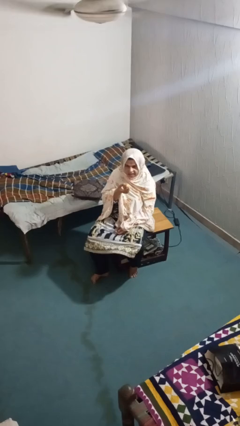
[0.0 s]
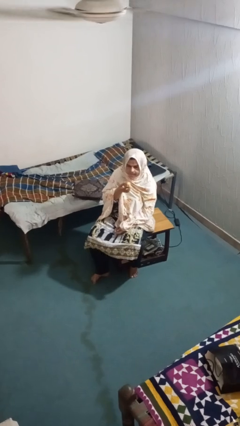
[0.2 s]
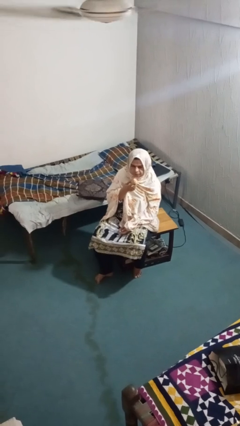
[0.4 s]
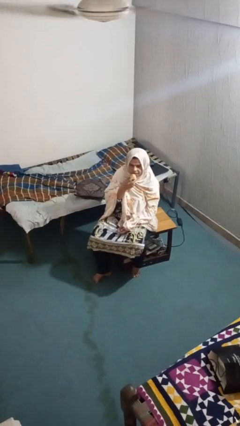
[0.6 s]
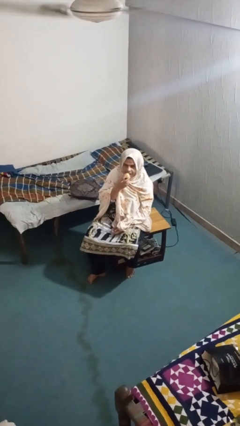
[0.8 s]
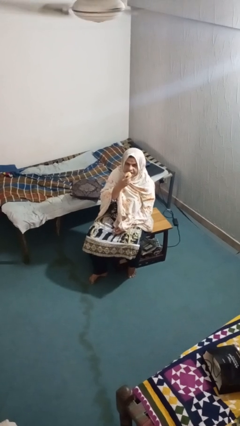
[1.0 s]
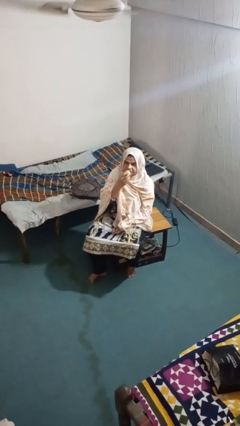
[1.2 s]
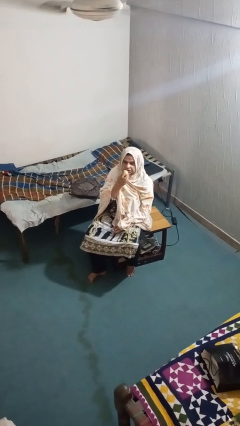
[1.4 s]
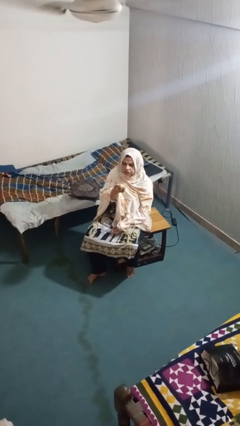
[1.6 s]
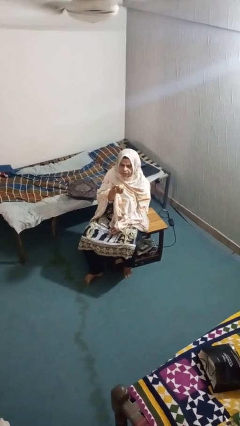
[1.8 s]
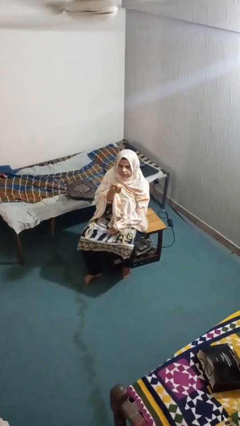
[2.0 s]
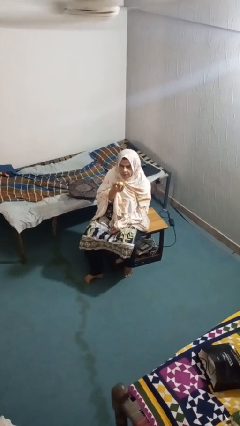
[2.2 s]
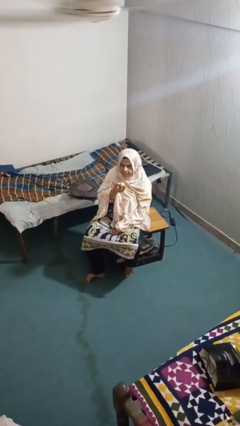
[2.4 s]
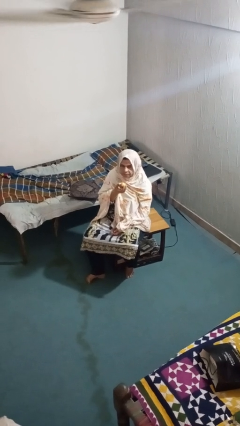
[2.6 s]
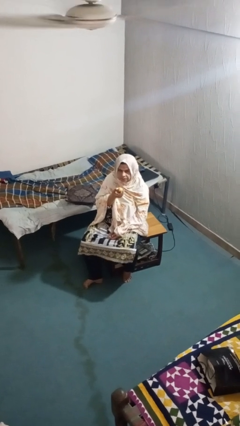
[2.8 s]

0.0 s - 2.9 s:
person eats apple

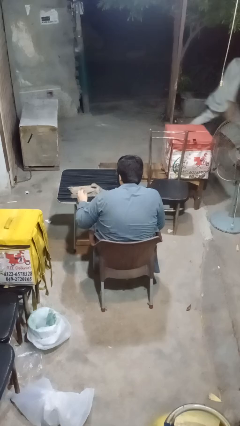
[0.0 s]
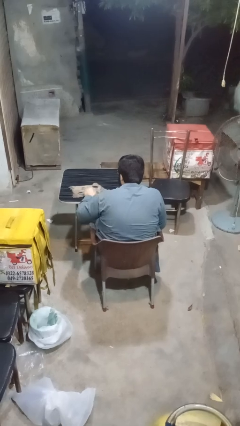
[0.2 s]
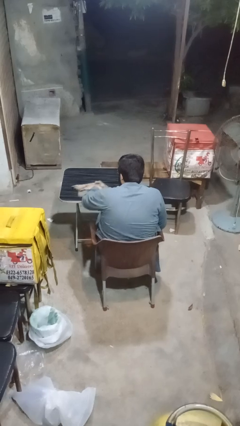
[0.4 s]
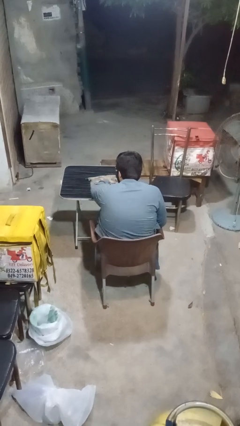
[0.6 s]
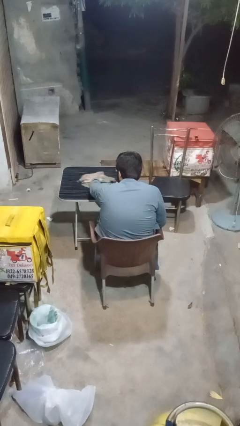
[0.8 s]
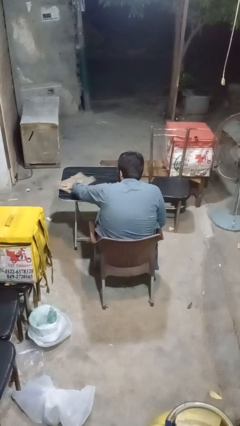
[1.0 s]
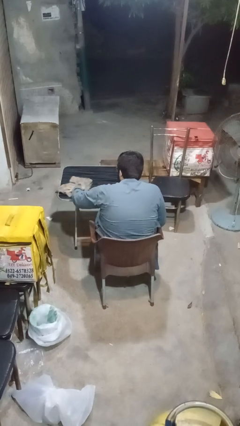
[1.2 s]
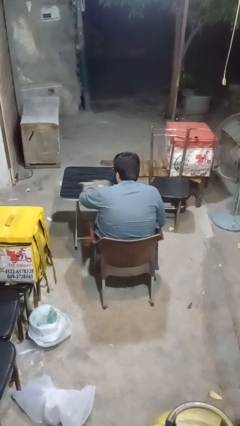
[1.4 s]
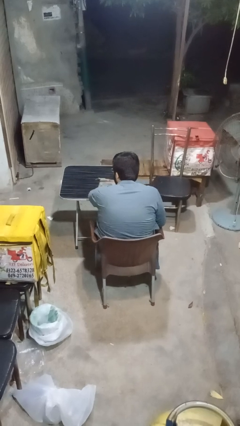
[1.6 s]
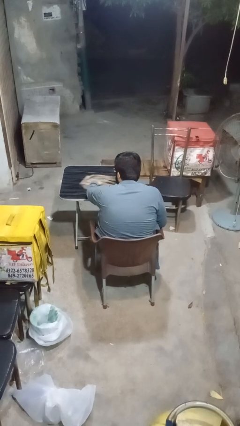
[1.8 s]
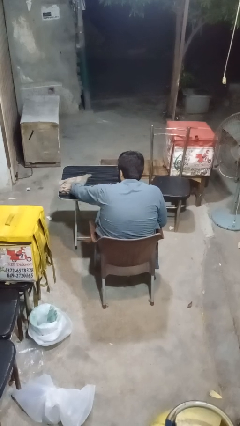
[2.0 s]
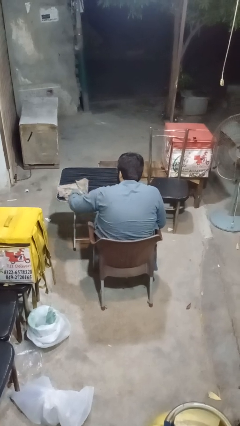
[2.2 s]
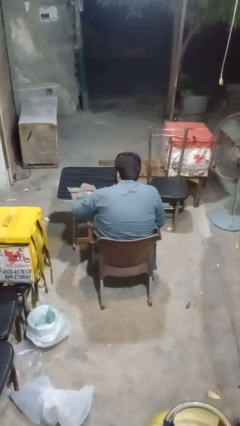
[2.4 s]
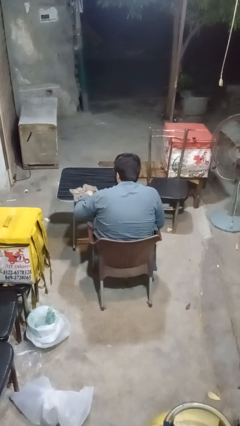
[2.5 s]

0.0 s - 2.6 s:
person cleans table with rag

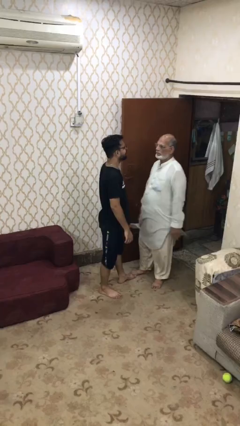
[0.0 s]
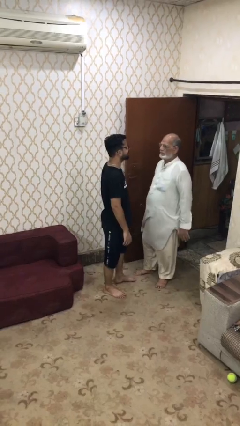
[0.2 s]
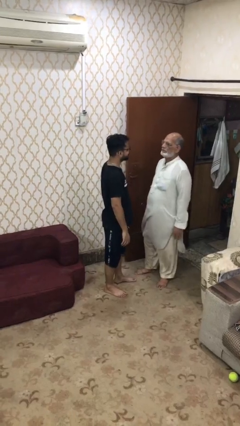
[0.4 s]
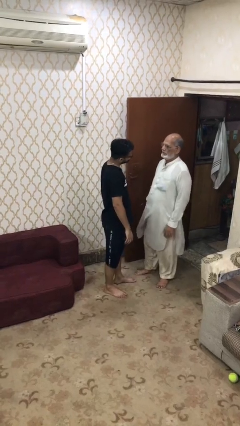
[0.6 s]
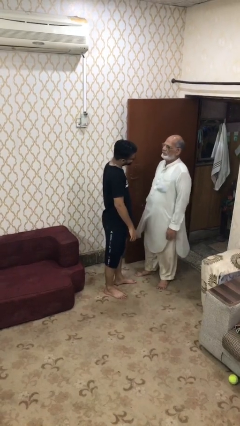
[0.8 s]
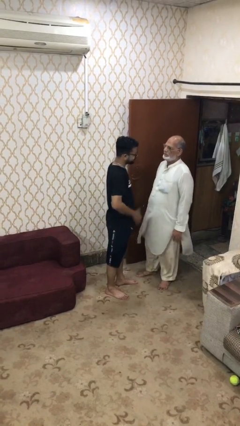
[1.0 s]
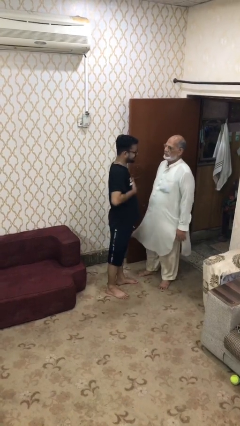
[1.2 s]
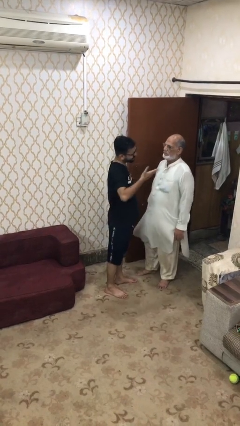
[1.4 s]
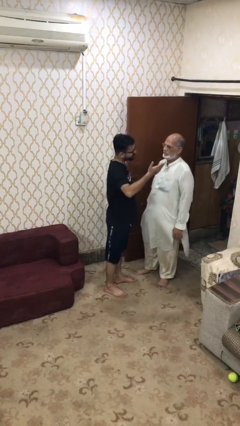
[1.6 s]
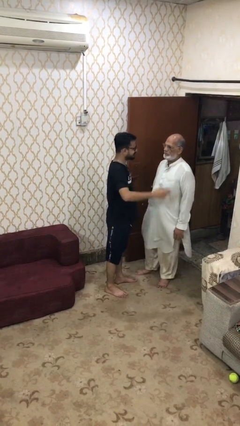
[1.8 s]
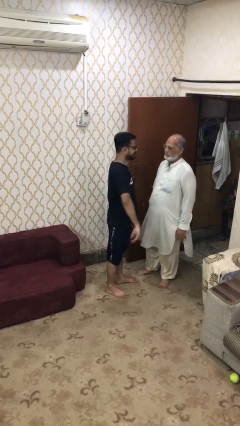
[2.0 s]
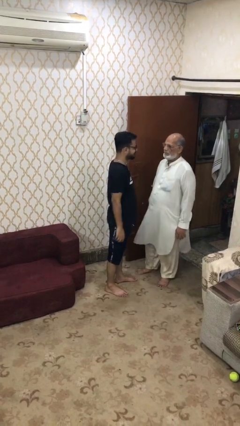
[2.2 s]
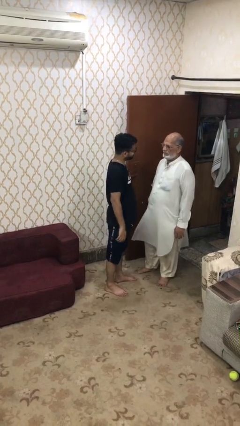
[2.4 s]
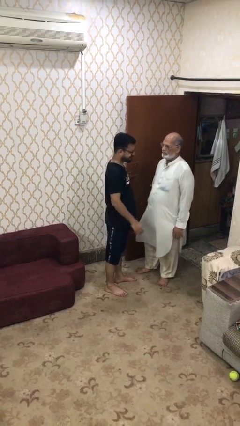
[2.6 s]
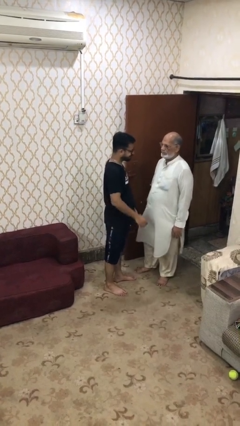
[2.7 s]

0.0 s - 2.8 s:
person talks to person

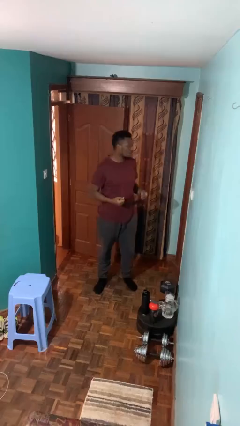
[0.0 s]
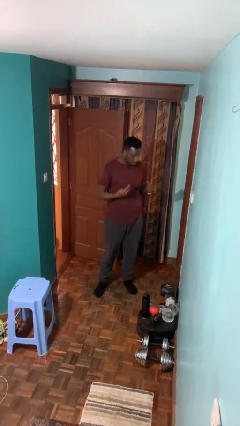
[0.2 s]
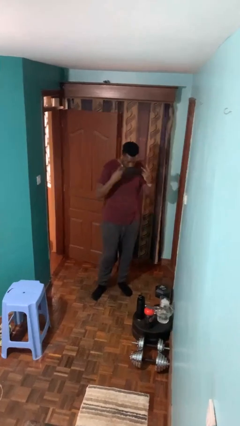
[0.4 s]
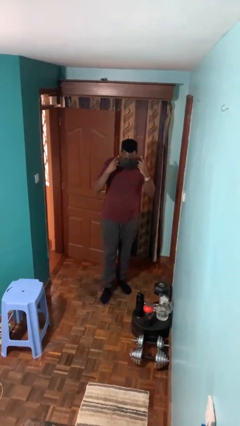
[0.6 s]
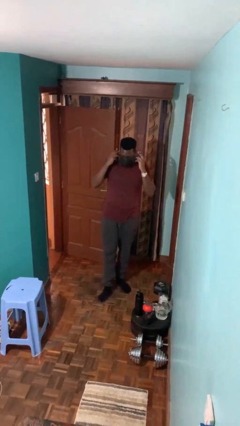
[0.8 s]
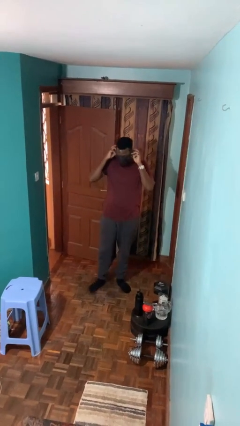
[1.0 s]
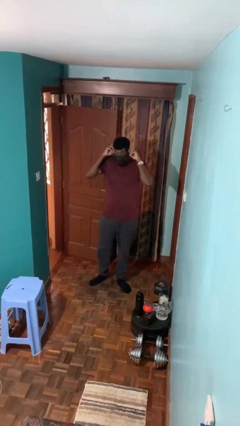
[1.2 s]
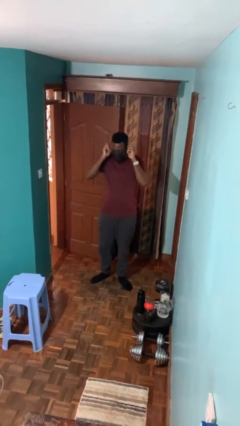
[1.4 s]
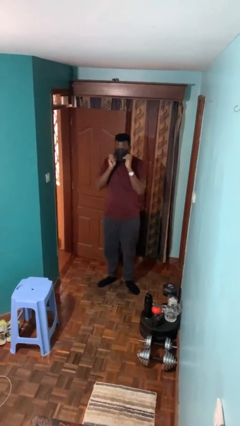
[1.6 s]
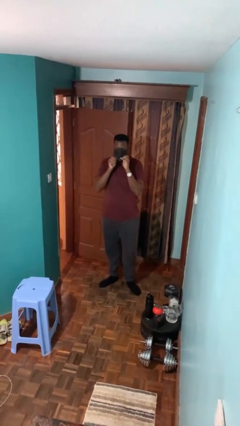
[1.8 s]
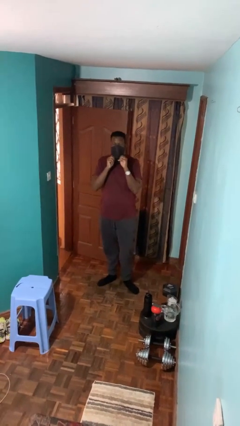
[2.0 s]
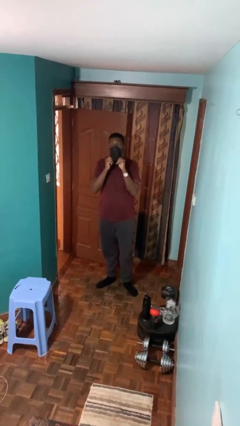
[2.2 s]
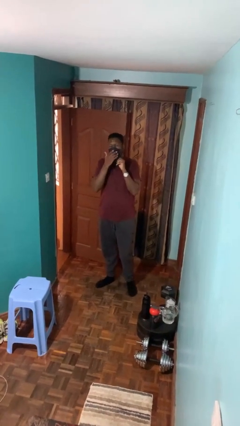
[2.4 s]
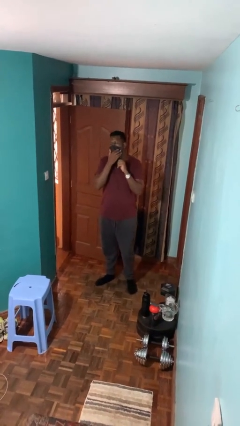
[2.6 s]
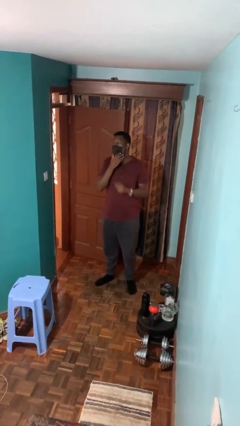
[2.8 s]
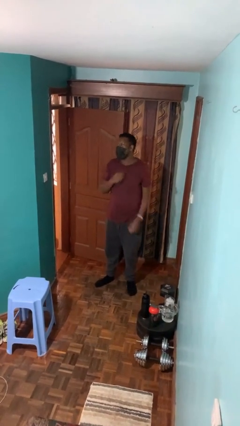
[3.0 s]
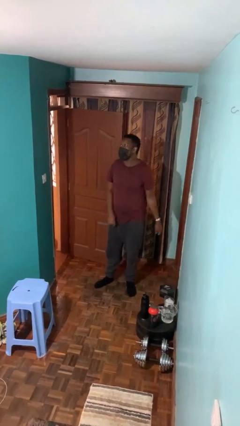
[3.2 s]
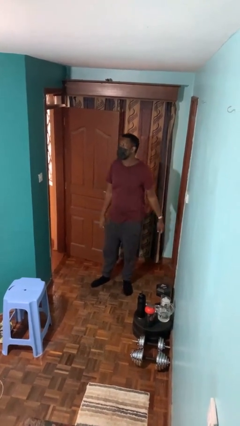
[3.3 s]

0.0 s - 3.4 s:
person puts on facemask

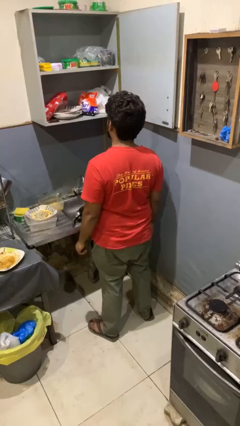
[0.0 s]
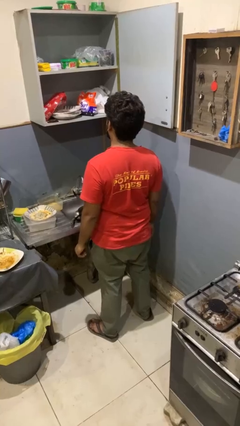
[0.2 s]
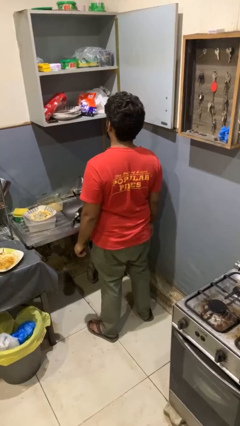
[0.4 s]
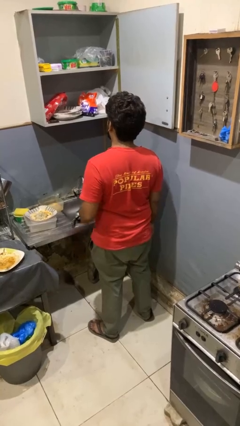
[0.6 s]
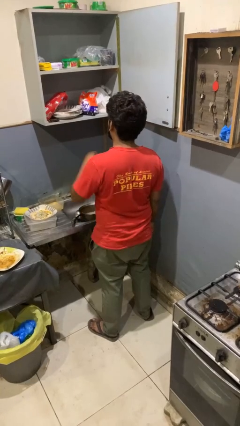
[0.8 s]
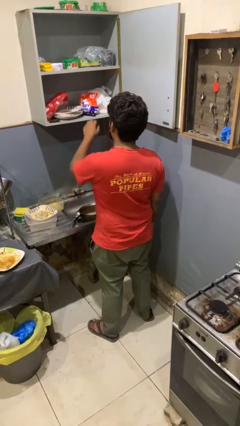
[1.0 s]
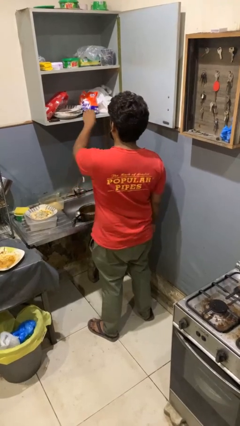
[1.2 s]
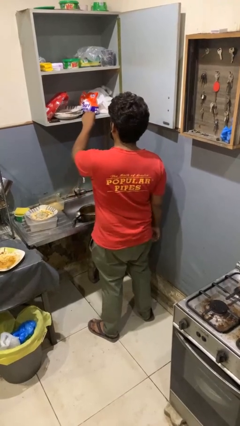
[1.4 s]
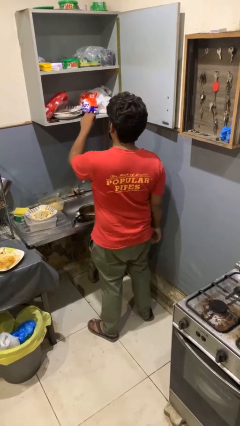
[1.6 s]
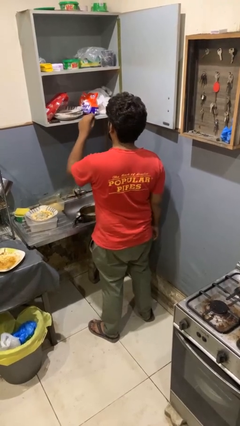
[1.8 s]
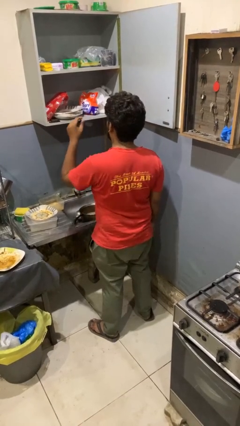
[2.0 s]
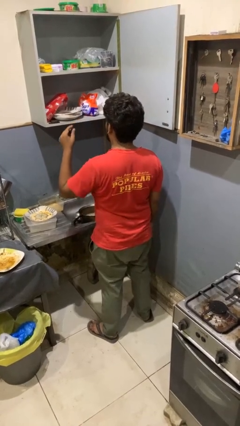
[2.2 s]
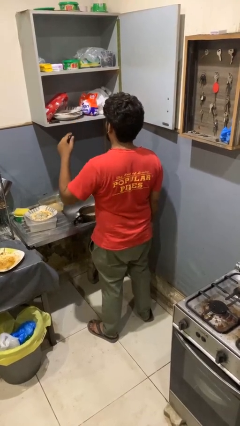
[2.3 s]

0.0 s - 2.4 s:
person takes object from cabinet

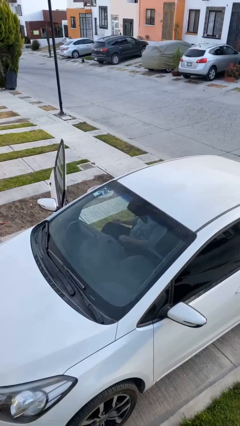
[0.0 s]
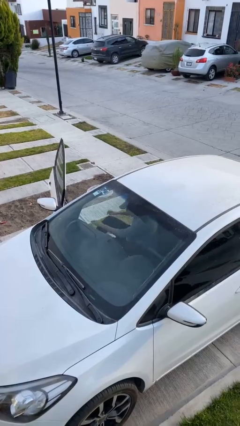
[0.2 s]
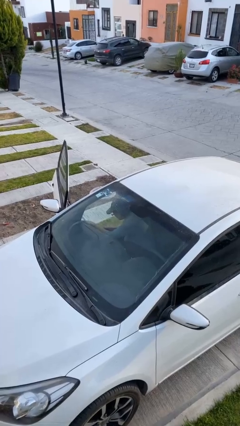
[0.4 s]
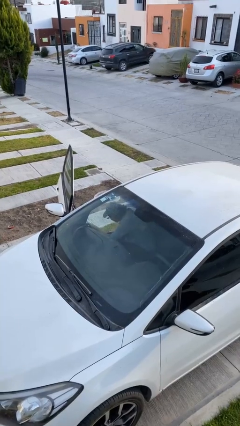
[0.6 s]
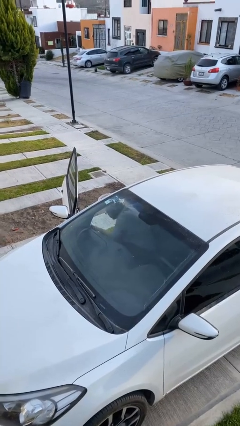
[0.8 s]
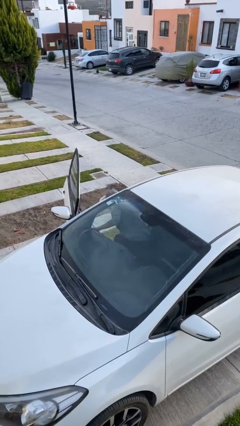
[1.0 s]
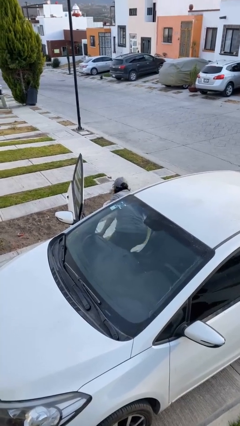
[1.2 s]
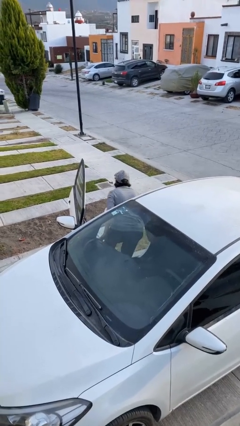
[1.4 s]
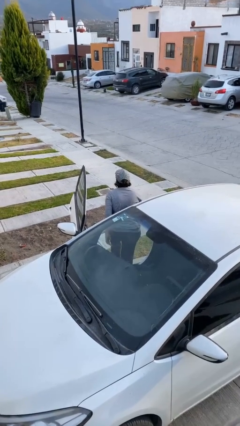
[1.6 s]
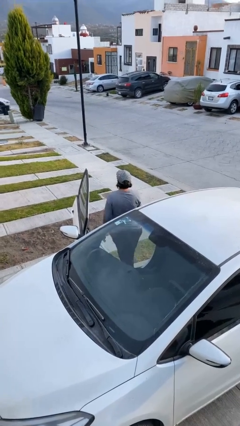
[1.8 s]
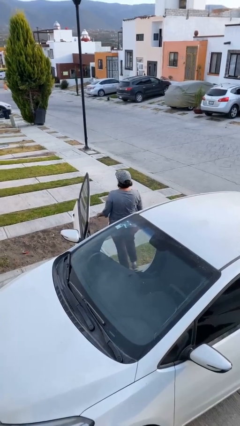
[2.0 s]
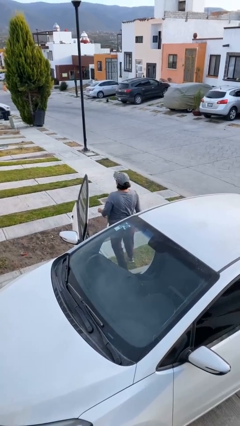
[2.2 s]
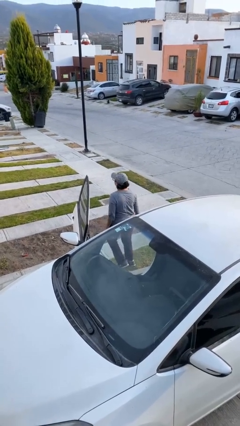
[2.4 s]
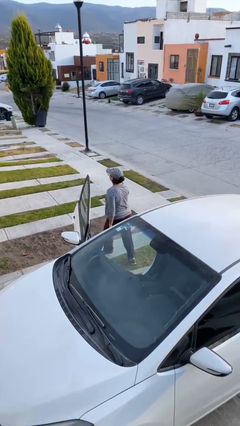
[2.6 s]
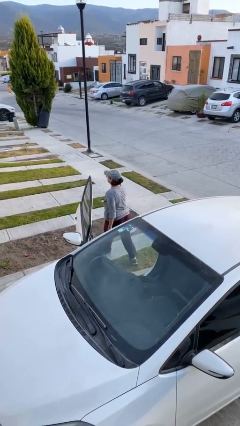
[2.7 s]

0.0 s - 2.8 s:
person exits car

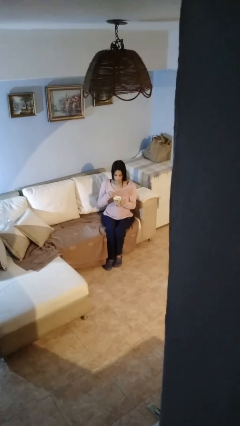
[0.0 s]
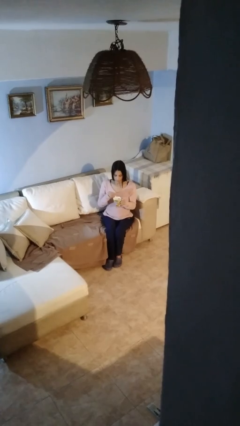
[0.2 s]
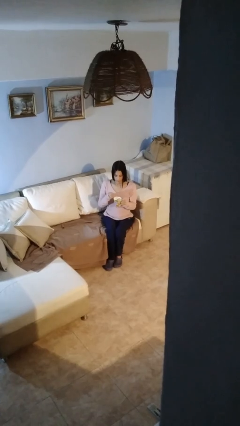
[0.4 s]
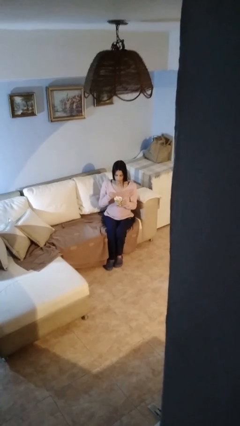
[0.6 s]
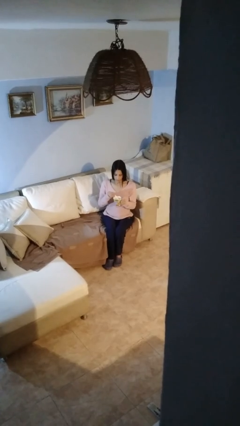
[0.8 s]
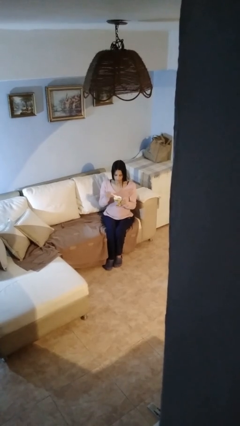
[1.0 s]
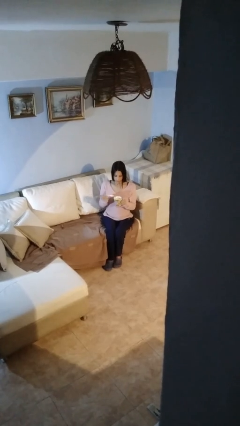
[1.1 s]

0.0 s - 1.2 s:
person stirs mug
